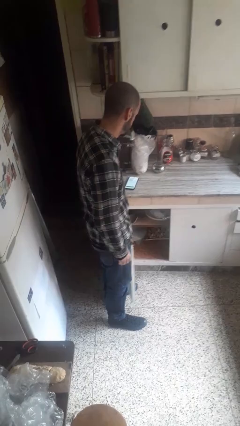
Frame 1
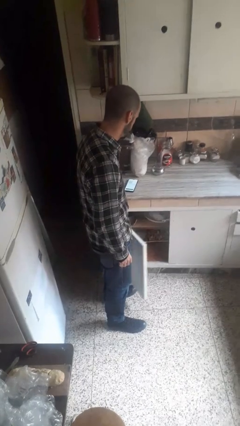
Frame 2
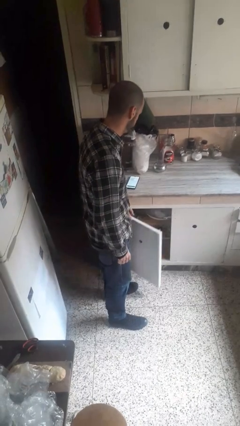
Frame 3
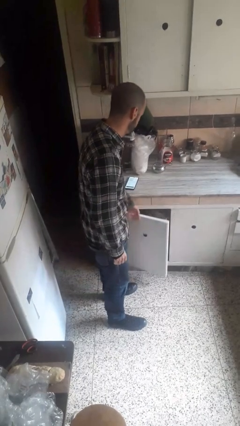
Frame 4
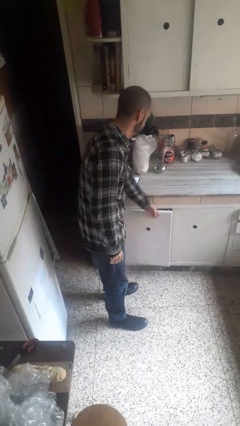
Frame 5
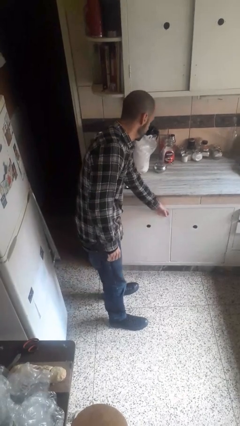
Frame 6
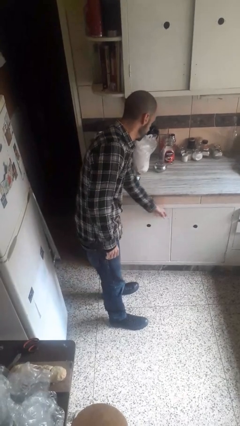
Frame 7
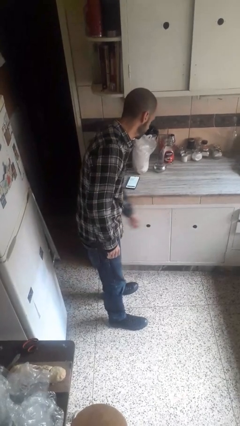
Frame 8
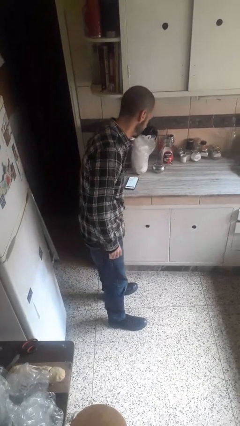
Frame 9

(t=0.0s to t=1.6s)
person closes closet door

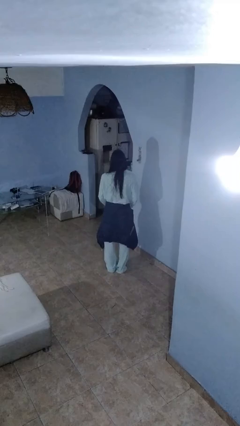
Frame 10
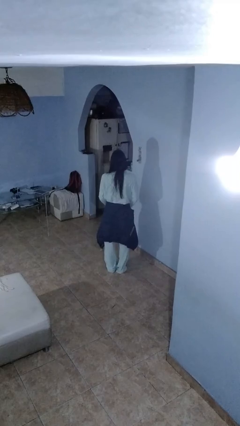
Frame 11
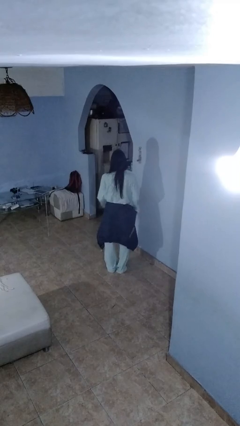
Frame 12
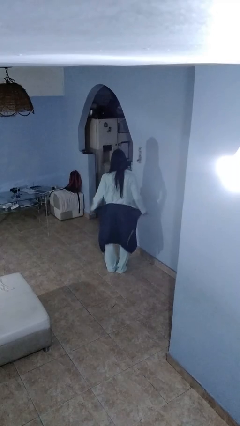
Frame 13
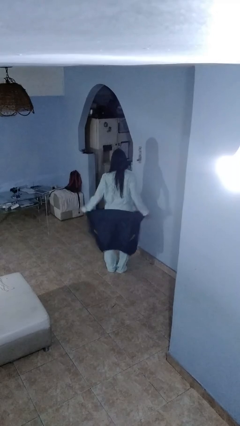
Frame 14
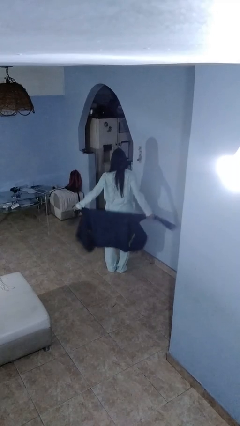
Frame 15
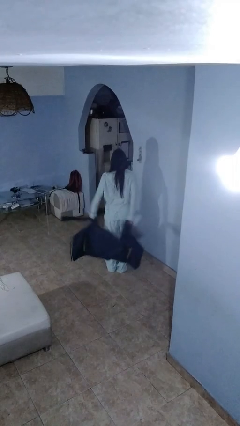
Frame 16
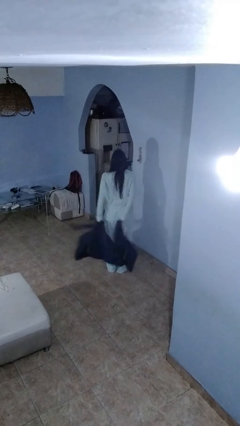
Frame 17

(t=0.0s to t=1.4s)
person unties jacket around waist

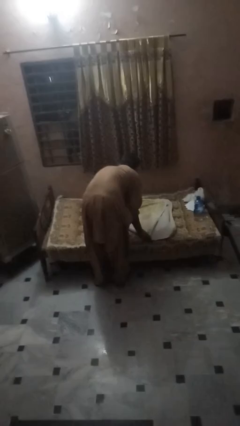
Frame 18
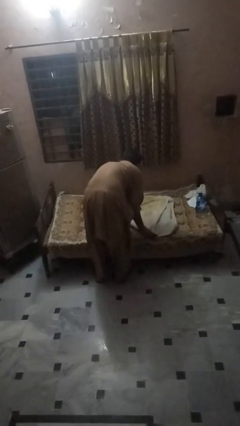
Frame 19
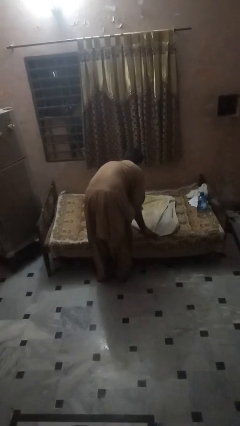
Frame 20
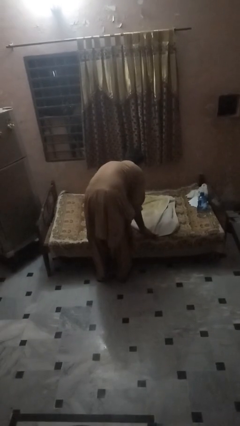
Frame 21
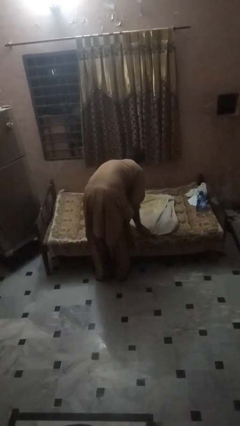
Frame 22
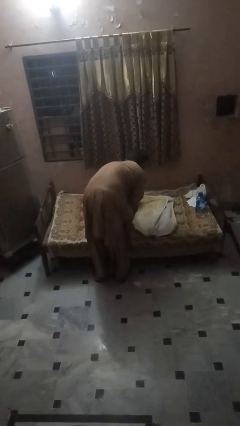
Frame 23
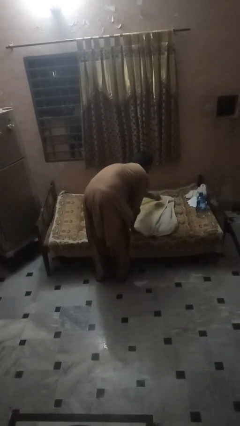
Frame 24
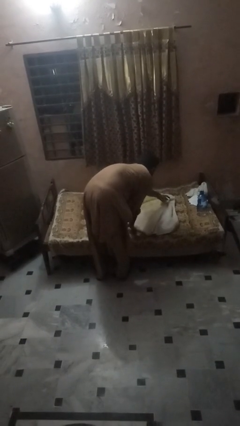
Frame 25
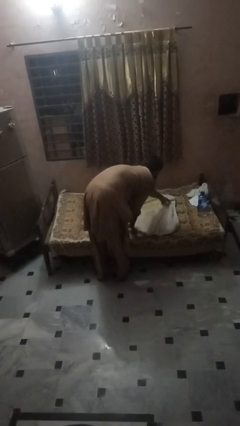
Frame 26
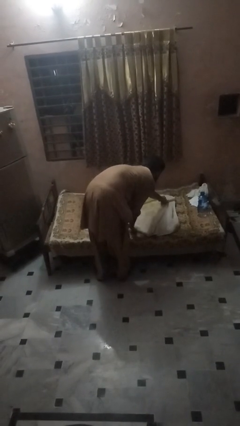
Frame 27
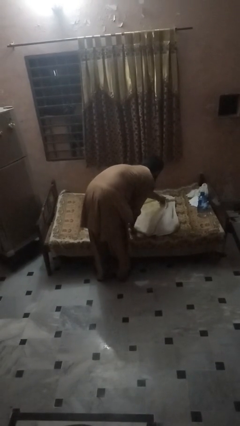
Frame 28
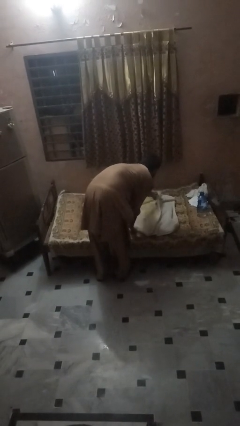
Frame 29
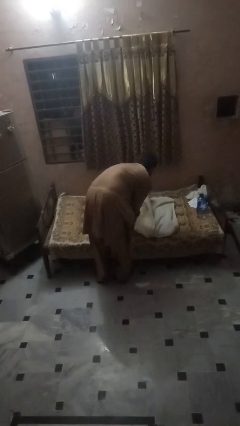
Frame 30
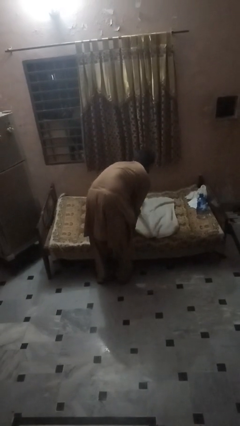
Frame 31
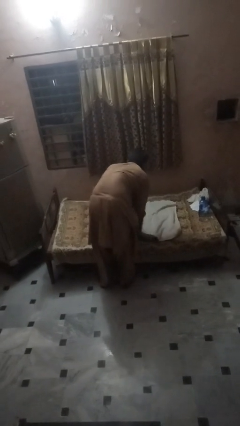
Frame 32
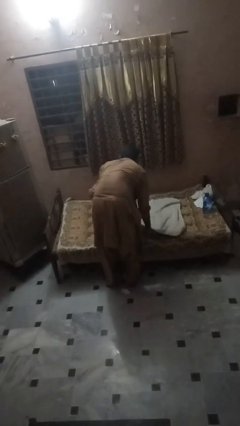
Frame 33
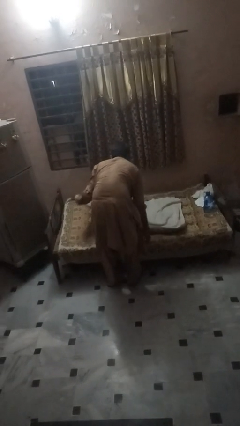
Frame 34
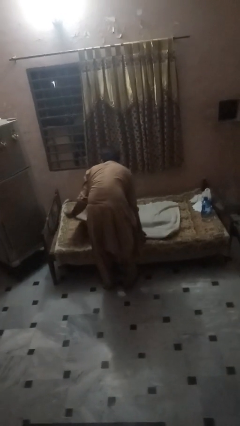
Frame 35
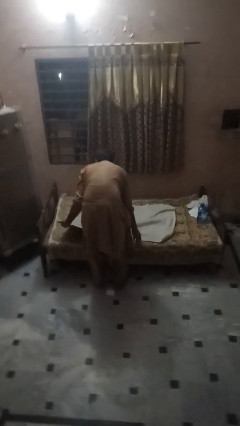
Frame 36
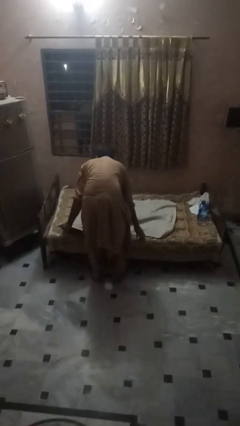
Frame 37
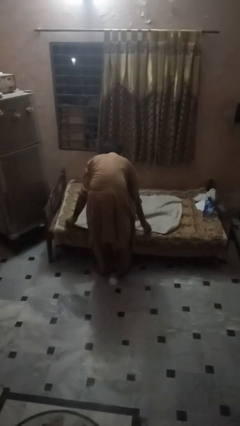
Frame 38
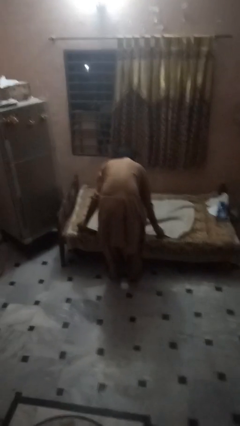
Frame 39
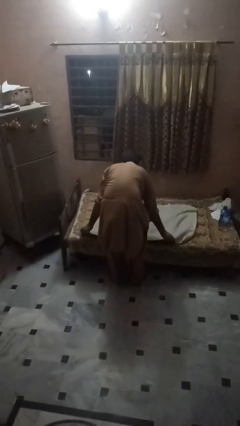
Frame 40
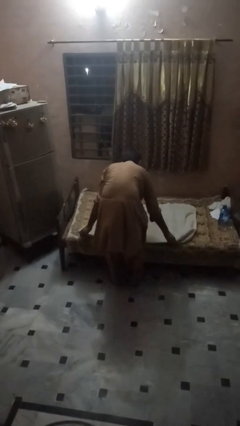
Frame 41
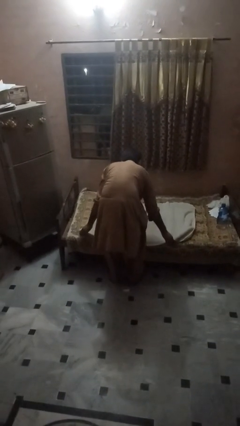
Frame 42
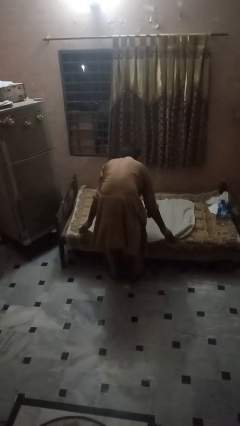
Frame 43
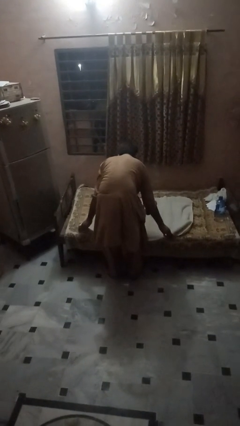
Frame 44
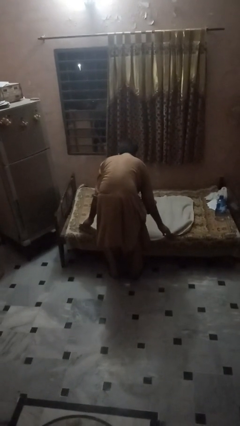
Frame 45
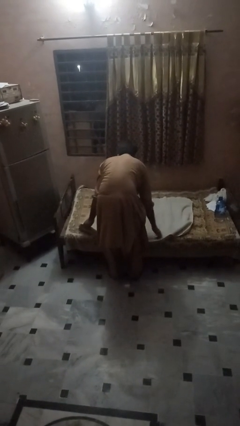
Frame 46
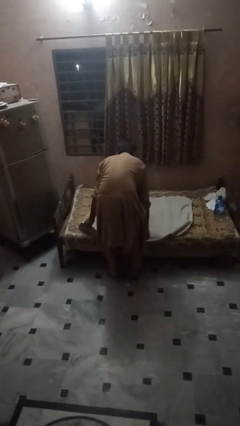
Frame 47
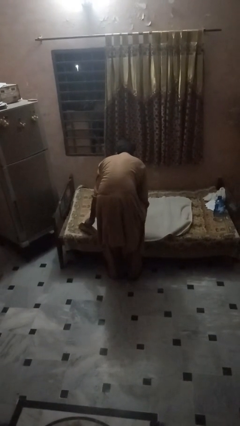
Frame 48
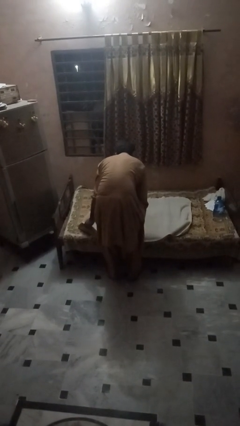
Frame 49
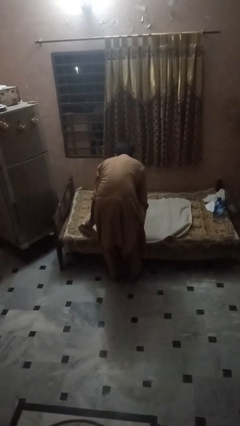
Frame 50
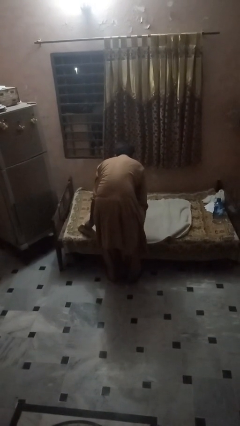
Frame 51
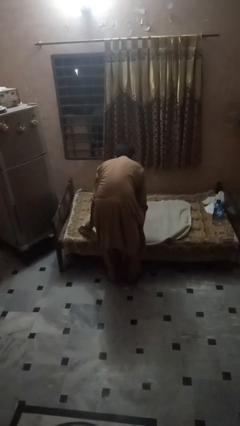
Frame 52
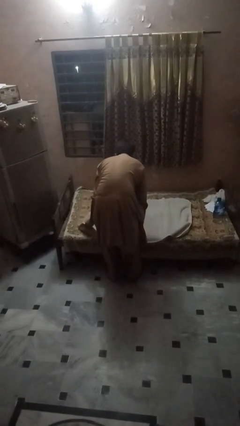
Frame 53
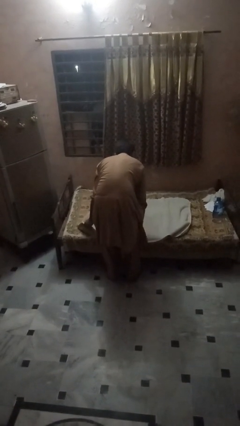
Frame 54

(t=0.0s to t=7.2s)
person unfolds blanket

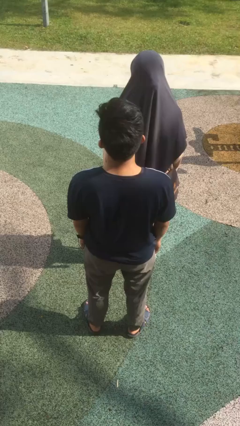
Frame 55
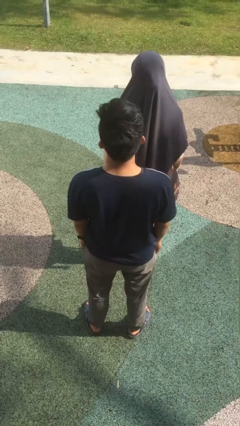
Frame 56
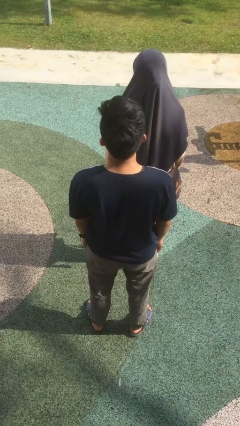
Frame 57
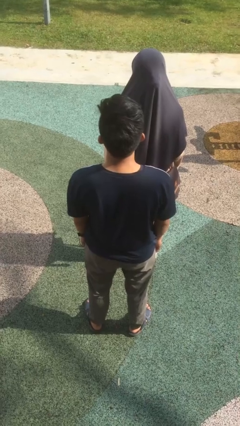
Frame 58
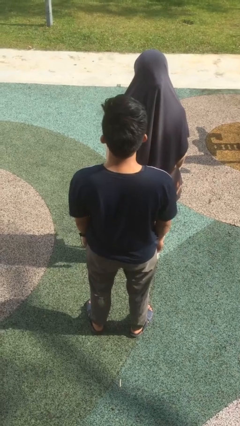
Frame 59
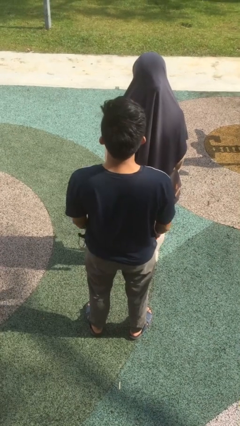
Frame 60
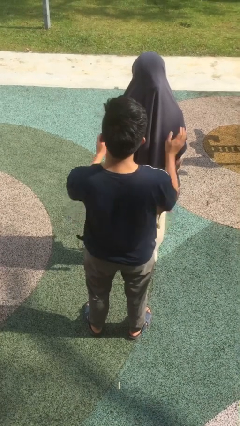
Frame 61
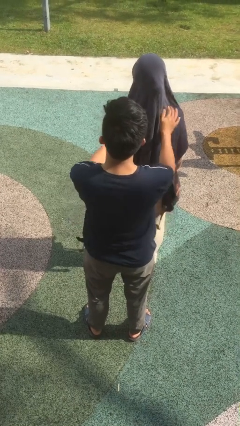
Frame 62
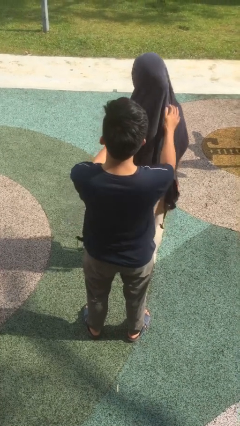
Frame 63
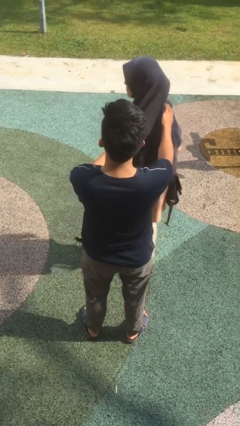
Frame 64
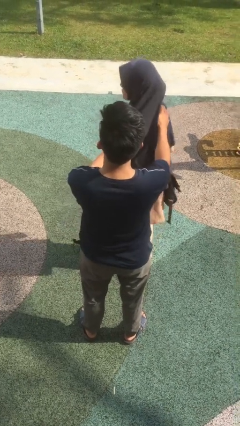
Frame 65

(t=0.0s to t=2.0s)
person grabs person by shoulder

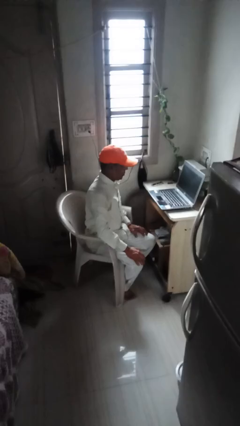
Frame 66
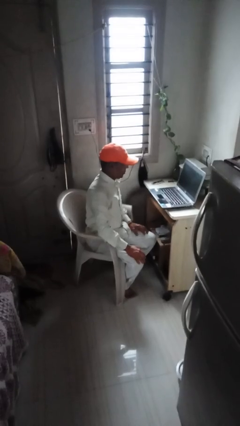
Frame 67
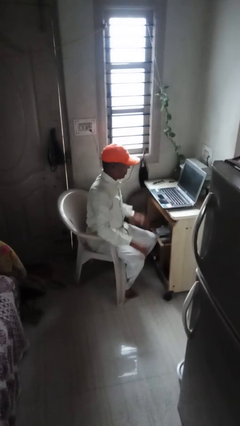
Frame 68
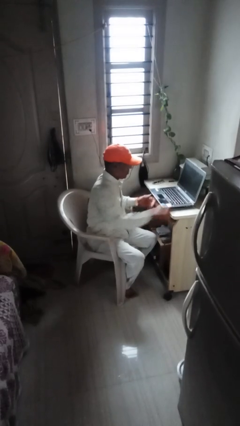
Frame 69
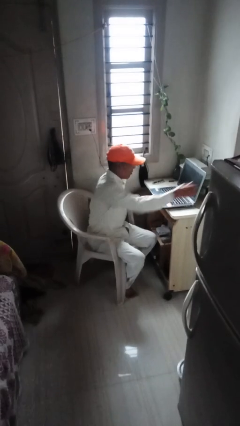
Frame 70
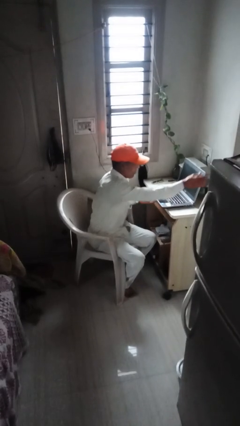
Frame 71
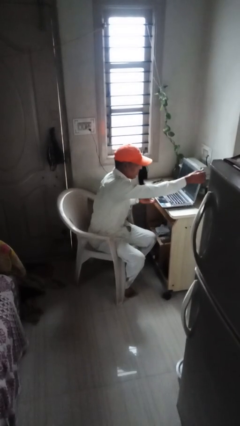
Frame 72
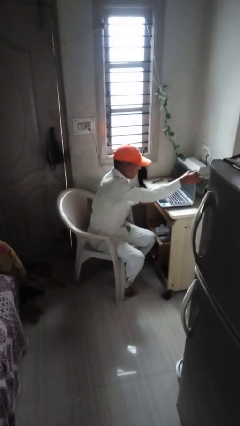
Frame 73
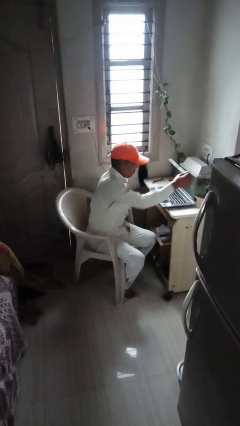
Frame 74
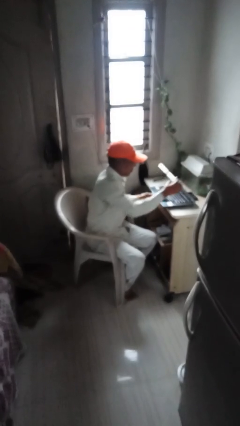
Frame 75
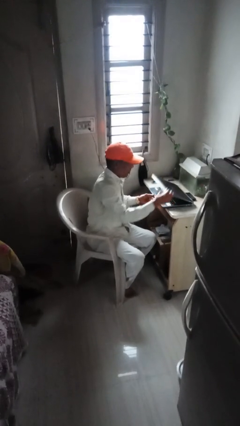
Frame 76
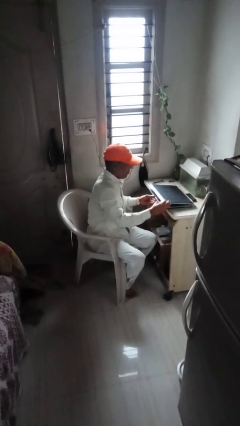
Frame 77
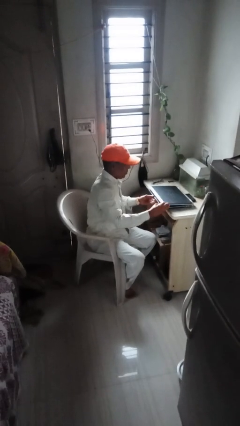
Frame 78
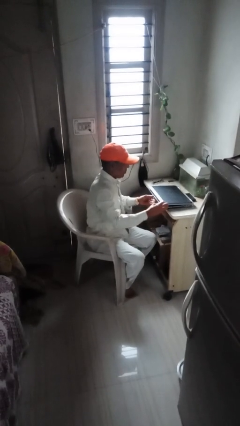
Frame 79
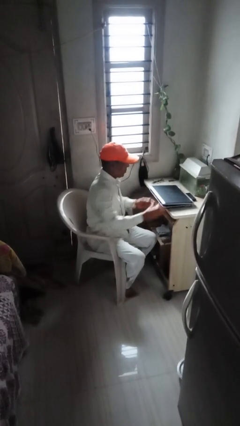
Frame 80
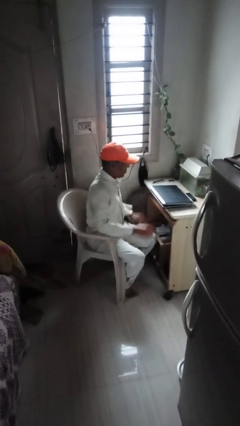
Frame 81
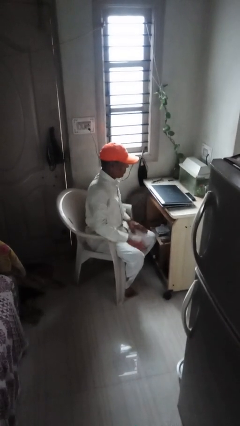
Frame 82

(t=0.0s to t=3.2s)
person closes laptop

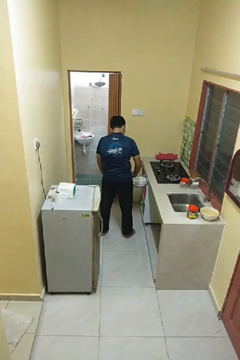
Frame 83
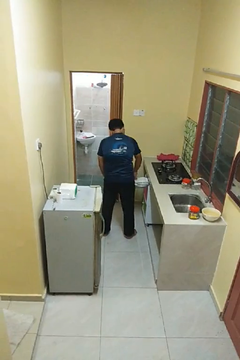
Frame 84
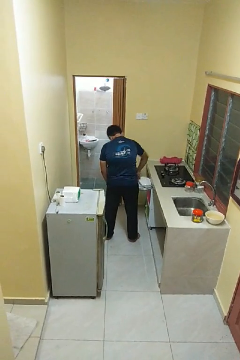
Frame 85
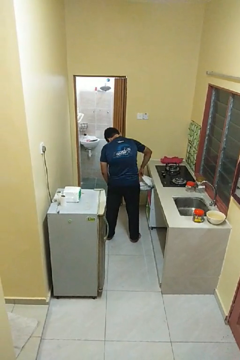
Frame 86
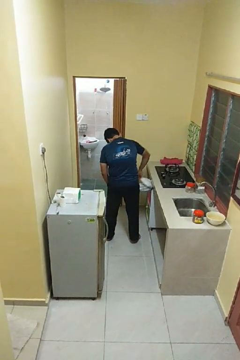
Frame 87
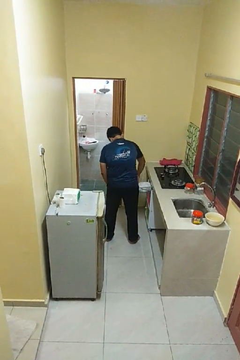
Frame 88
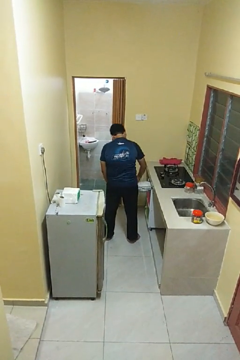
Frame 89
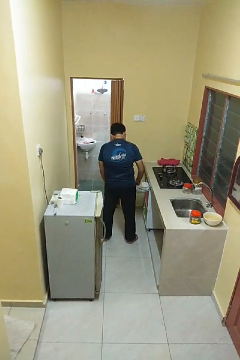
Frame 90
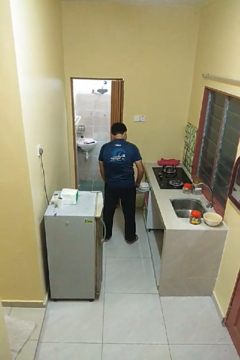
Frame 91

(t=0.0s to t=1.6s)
person searches in kitchen drawer

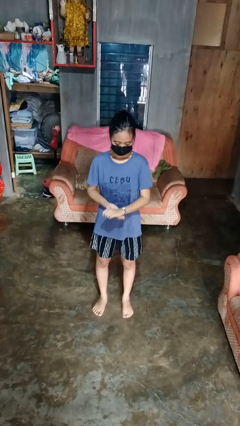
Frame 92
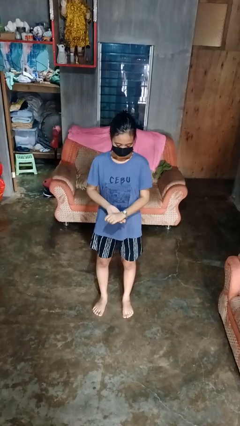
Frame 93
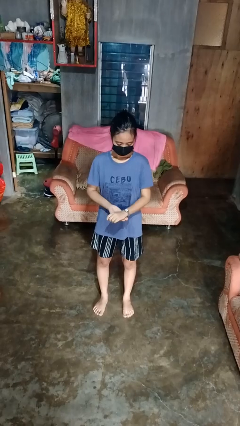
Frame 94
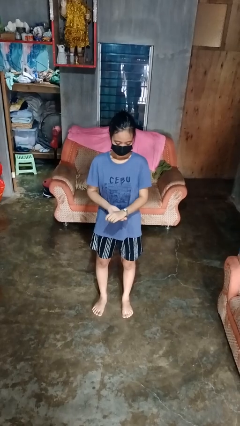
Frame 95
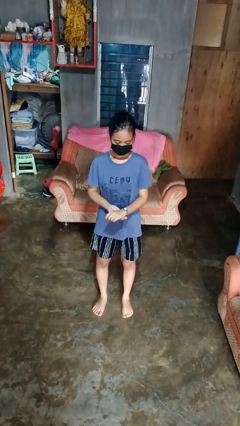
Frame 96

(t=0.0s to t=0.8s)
person puts on wristwatch
